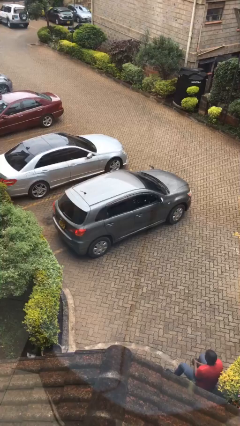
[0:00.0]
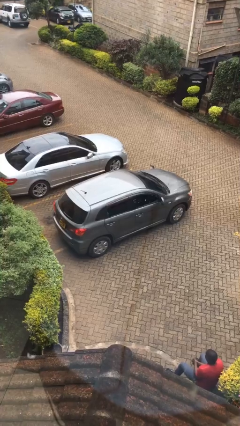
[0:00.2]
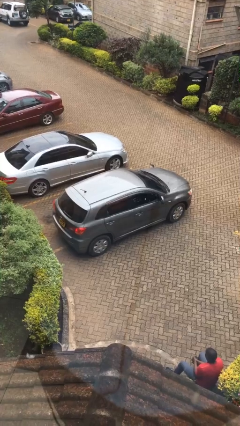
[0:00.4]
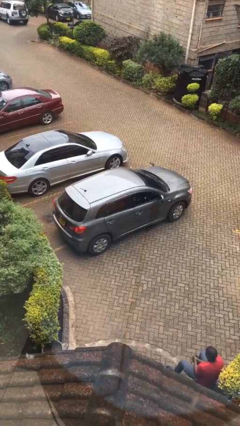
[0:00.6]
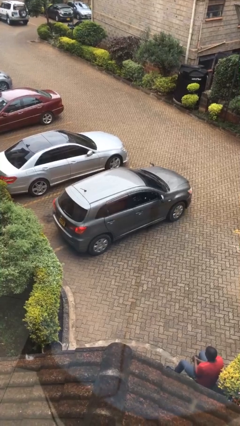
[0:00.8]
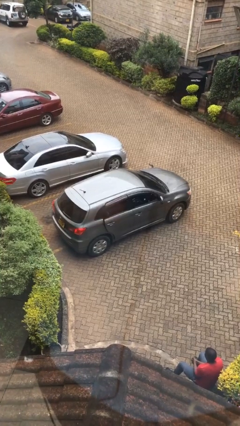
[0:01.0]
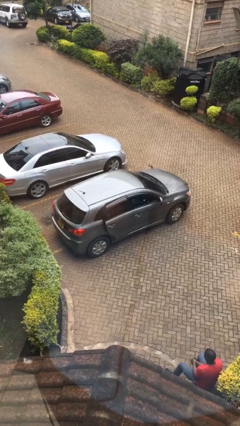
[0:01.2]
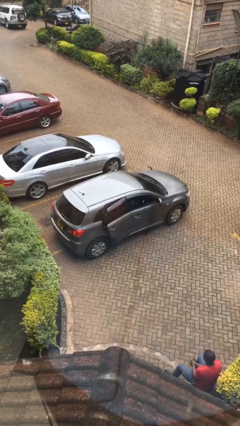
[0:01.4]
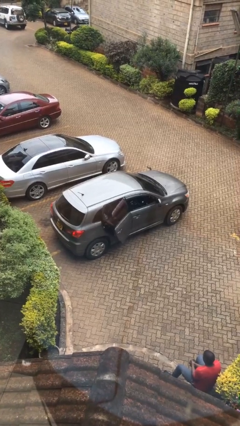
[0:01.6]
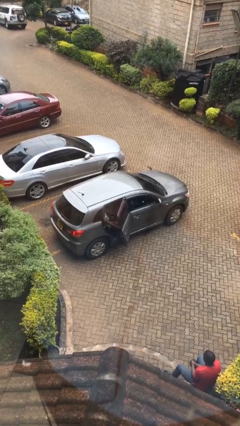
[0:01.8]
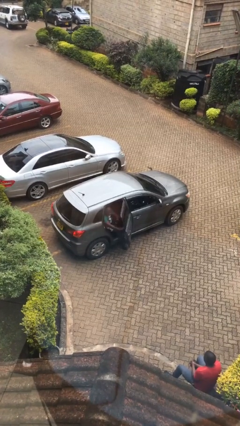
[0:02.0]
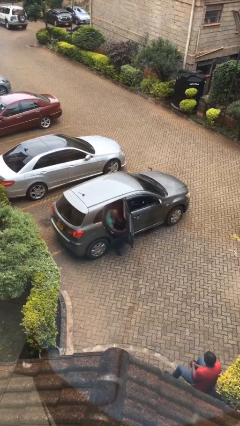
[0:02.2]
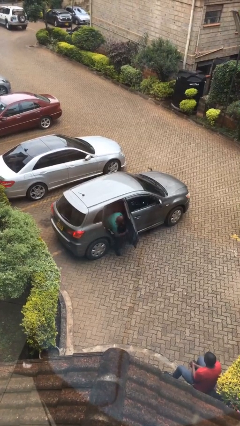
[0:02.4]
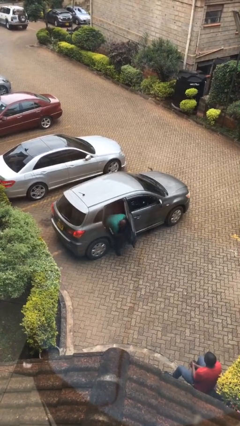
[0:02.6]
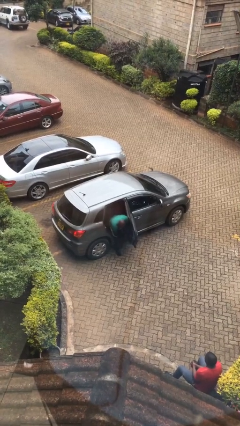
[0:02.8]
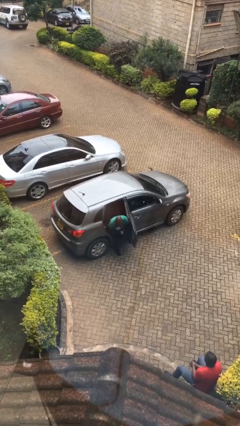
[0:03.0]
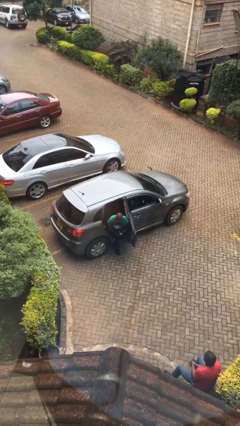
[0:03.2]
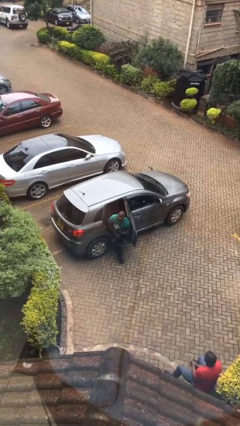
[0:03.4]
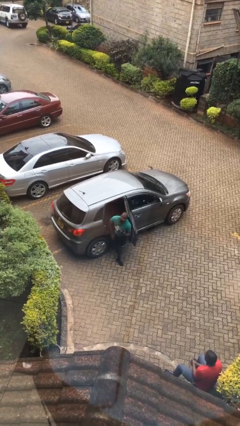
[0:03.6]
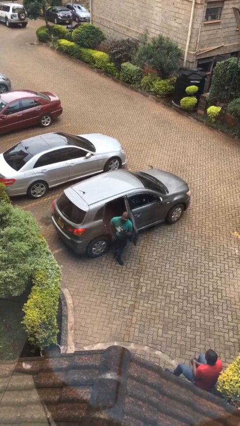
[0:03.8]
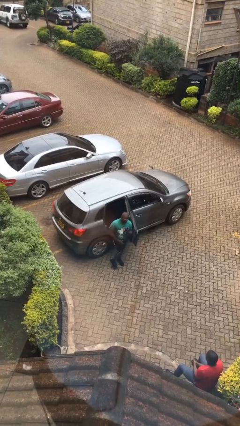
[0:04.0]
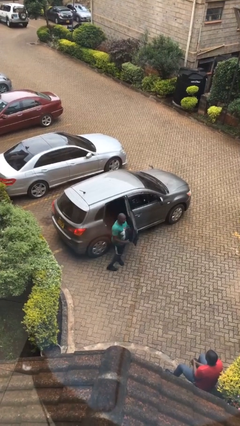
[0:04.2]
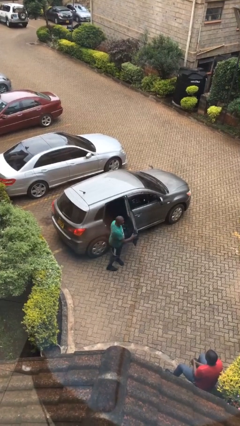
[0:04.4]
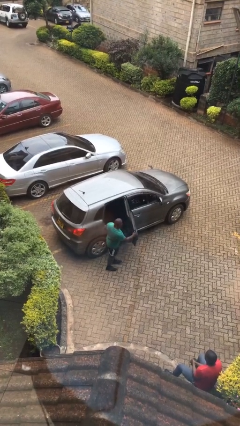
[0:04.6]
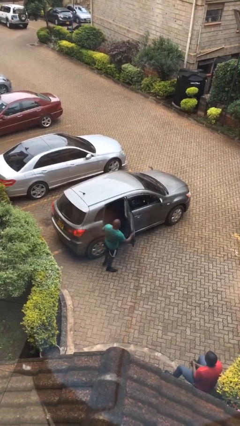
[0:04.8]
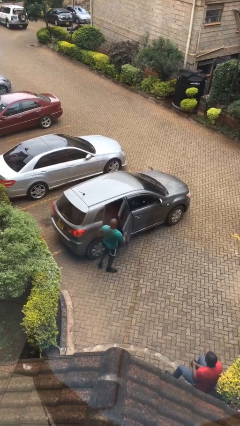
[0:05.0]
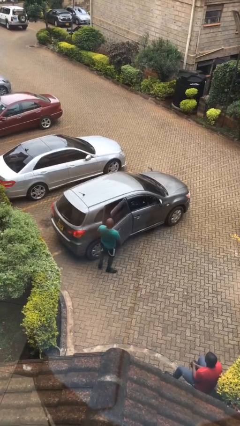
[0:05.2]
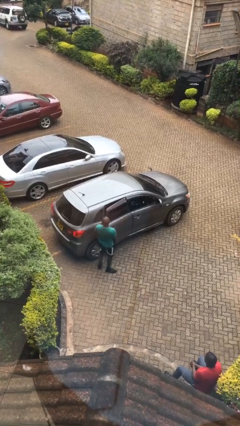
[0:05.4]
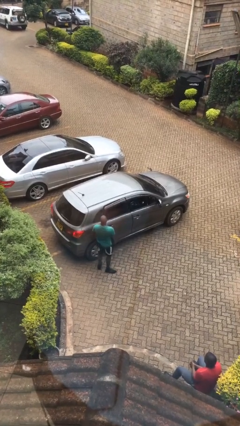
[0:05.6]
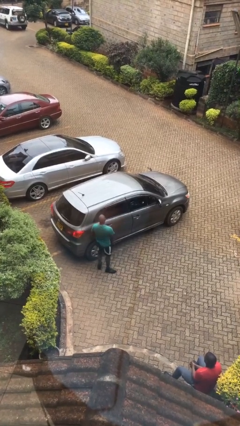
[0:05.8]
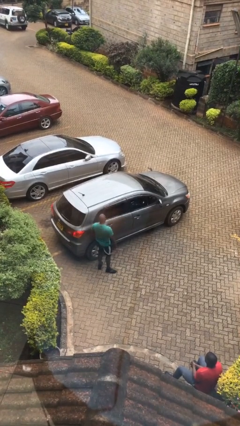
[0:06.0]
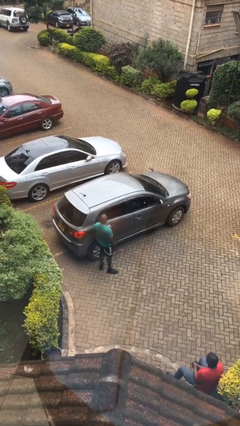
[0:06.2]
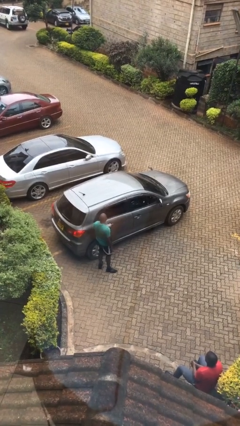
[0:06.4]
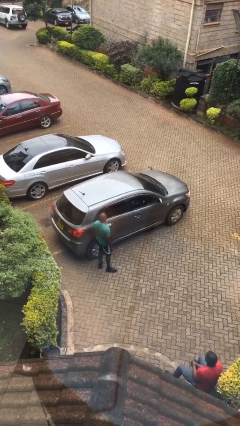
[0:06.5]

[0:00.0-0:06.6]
car drops off person

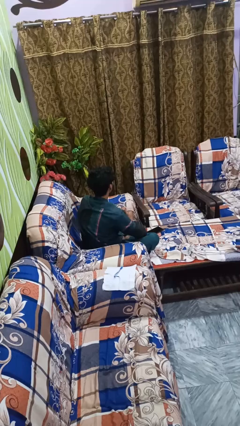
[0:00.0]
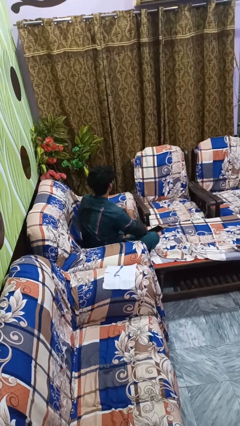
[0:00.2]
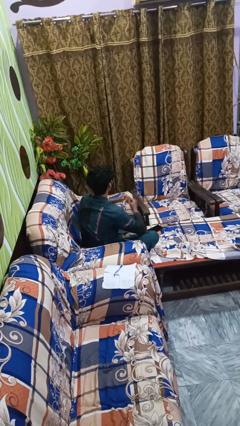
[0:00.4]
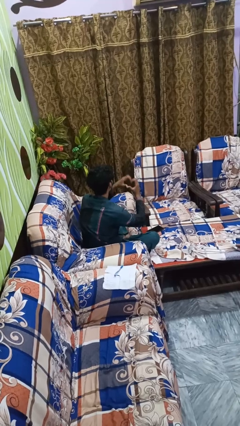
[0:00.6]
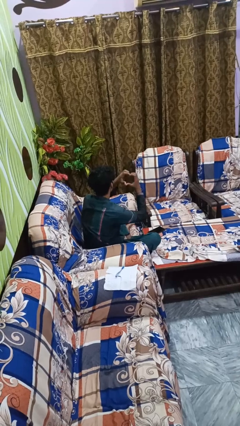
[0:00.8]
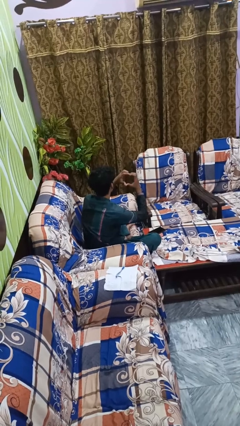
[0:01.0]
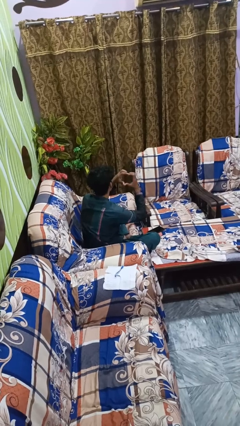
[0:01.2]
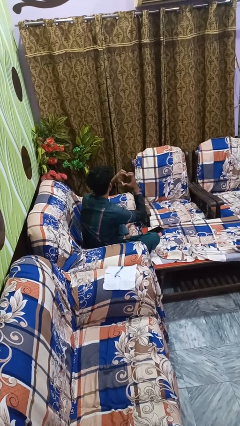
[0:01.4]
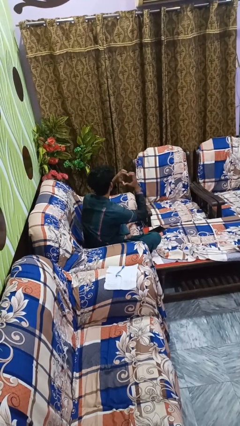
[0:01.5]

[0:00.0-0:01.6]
person gestures heart

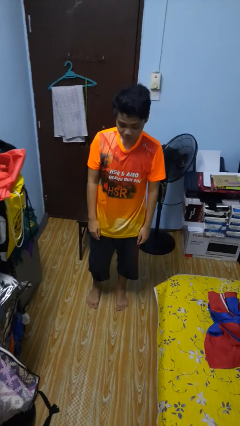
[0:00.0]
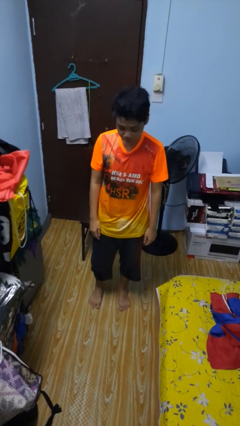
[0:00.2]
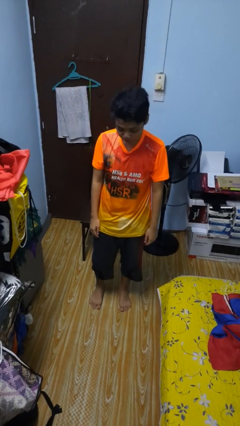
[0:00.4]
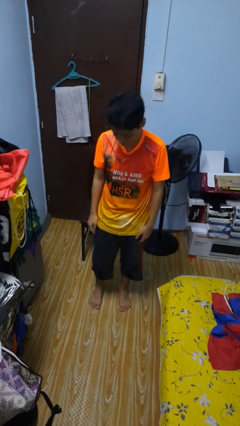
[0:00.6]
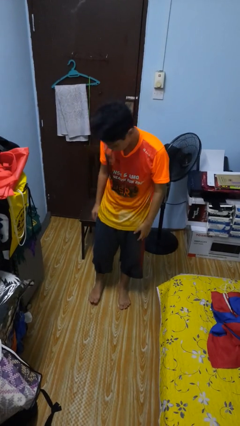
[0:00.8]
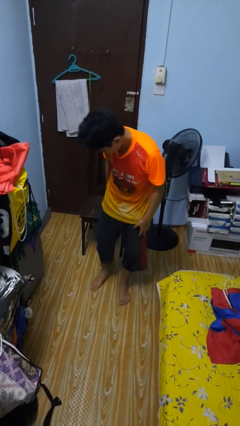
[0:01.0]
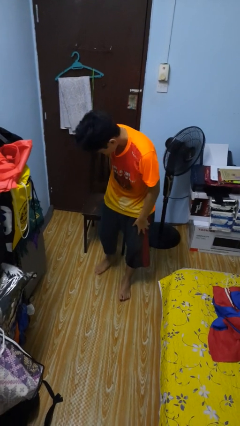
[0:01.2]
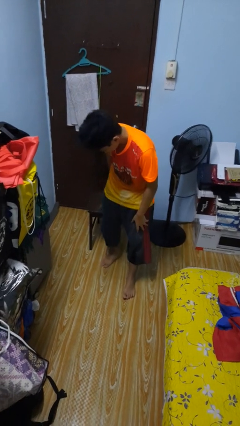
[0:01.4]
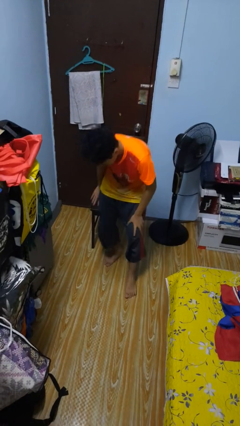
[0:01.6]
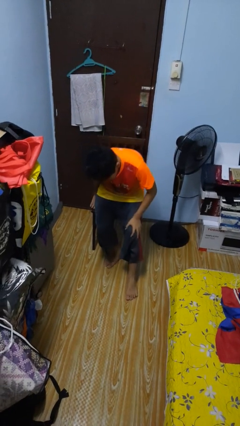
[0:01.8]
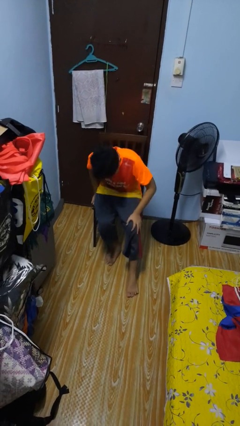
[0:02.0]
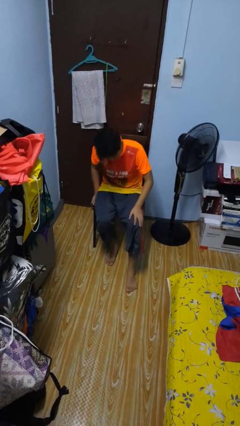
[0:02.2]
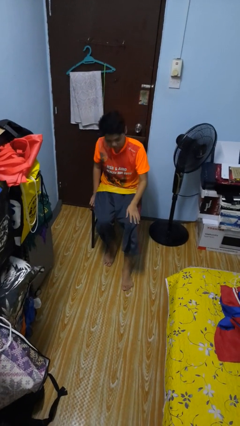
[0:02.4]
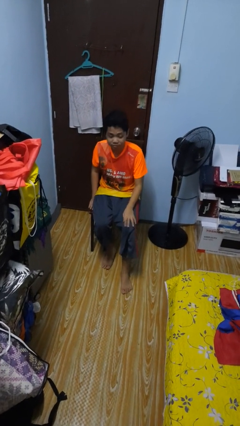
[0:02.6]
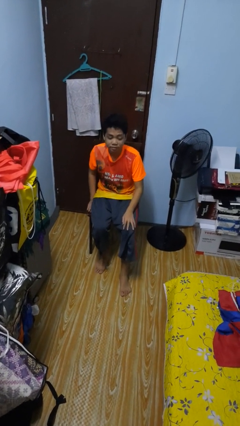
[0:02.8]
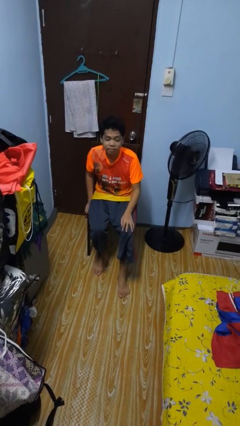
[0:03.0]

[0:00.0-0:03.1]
person sits down

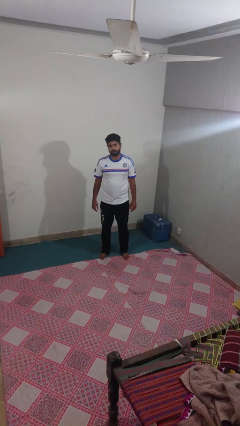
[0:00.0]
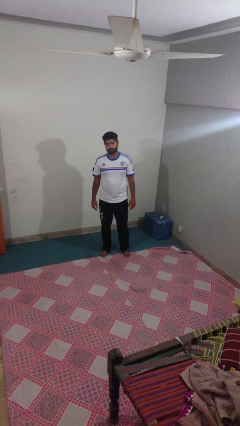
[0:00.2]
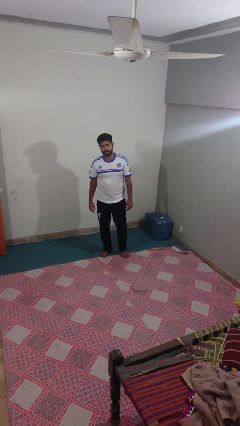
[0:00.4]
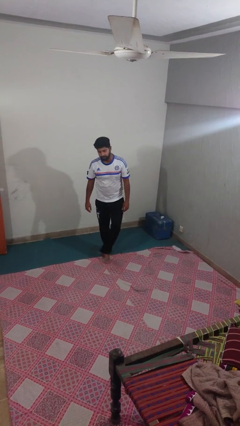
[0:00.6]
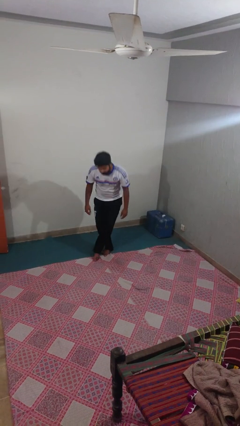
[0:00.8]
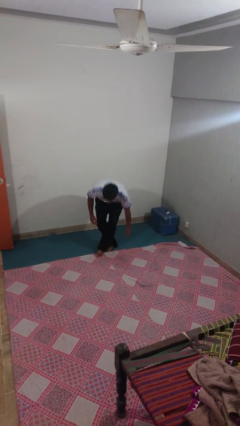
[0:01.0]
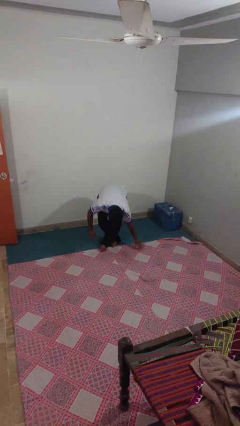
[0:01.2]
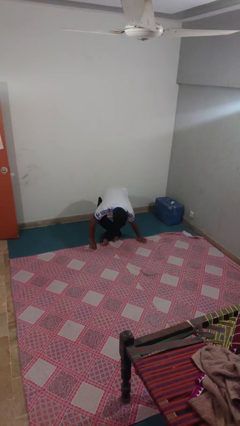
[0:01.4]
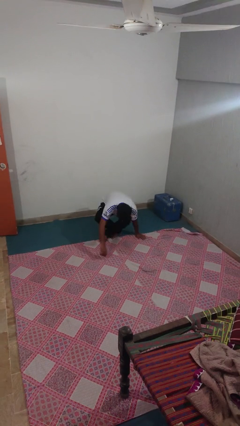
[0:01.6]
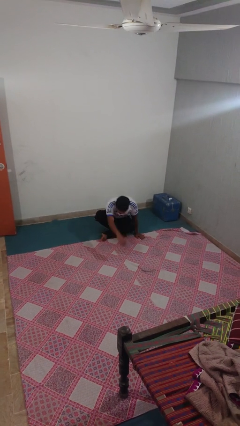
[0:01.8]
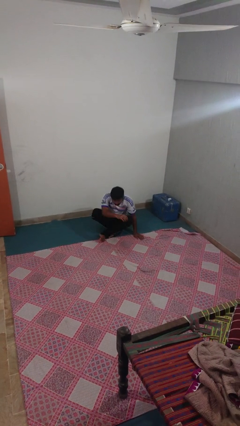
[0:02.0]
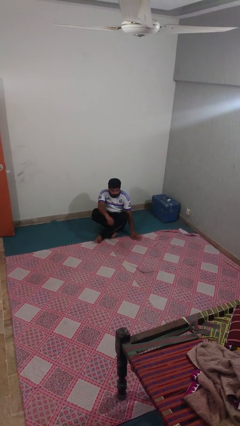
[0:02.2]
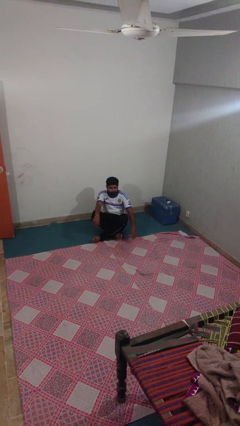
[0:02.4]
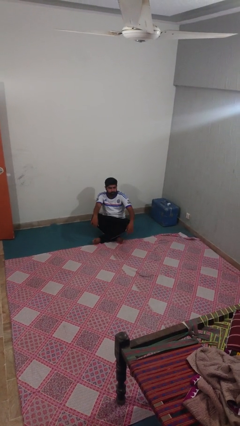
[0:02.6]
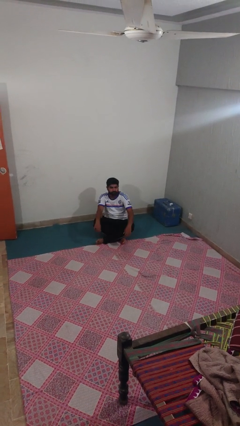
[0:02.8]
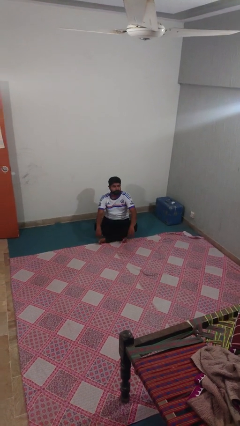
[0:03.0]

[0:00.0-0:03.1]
person sits crisscross

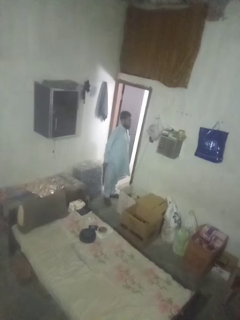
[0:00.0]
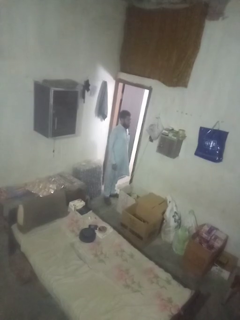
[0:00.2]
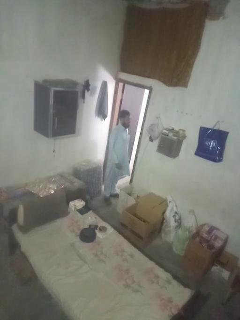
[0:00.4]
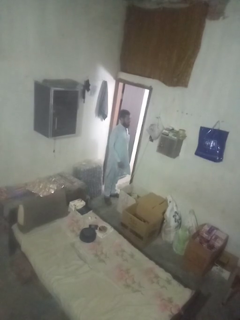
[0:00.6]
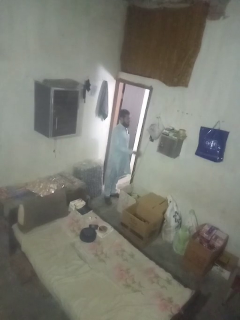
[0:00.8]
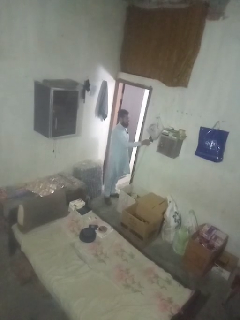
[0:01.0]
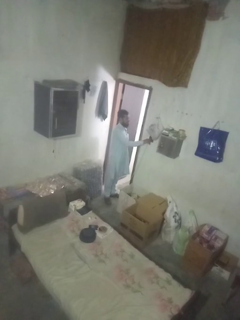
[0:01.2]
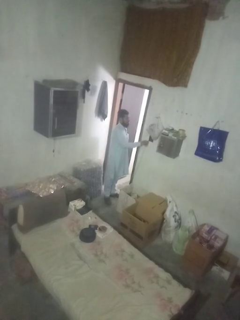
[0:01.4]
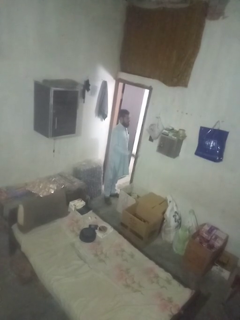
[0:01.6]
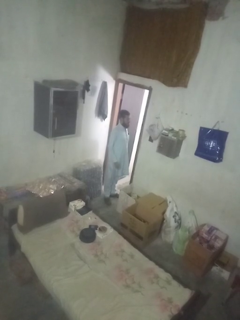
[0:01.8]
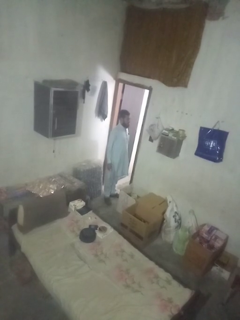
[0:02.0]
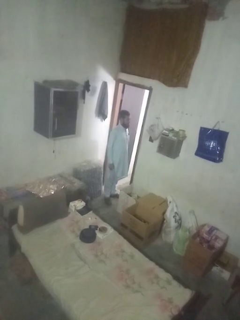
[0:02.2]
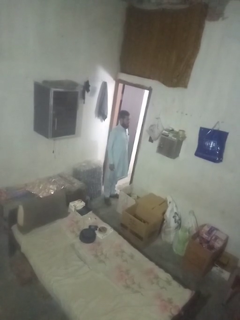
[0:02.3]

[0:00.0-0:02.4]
person unplugs from electrical socket

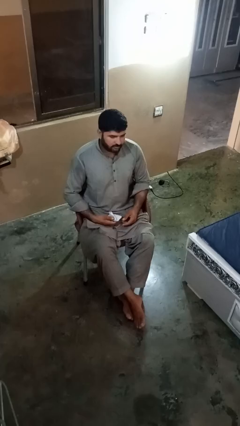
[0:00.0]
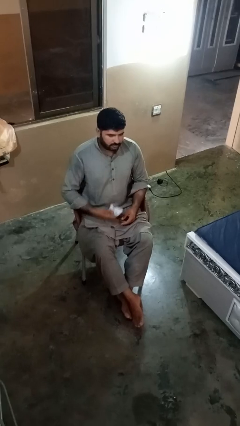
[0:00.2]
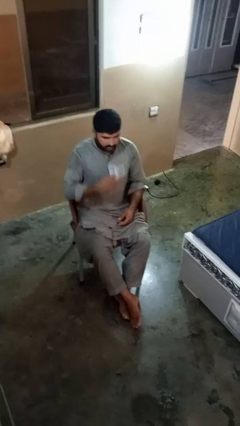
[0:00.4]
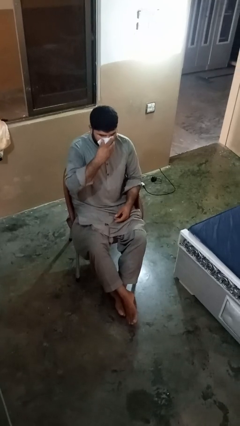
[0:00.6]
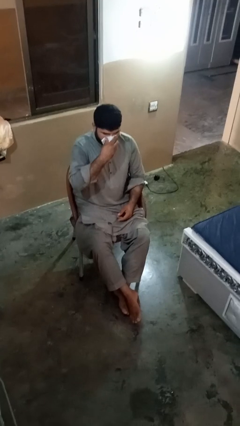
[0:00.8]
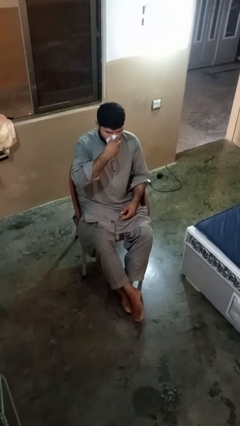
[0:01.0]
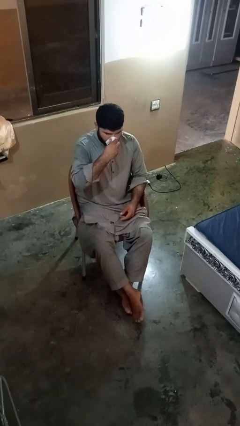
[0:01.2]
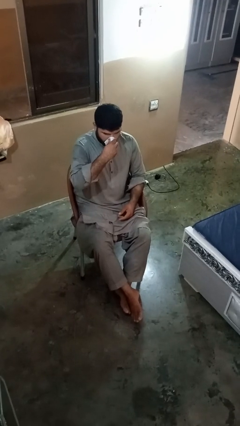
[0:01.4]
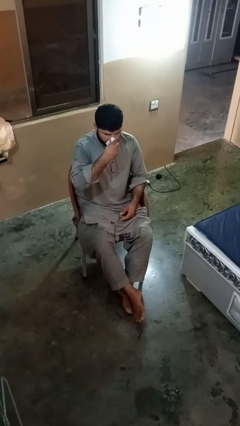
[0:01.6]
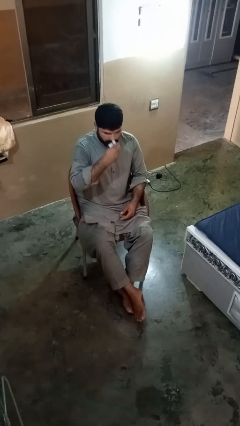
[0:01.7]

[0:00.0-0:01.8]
person blows nose
